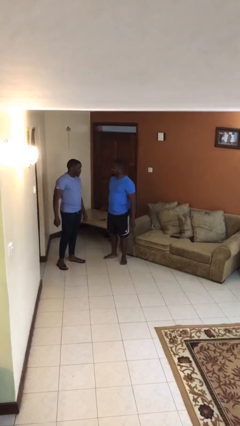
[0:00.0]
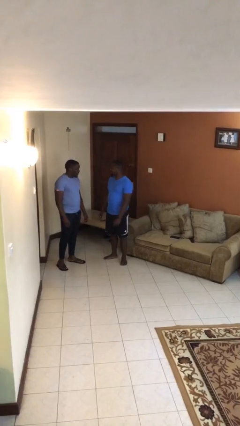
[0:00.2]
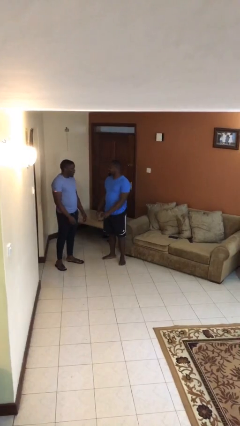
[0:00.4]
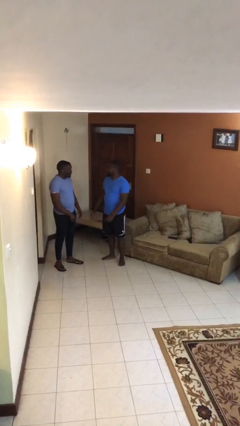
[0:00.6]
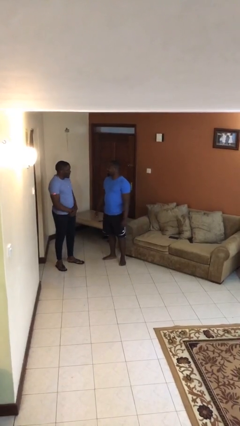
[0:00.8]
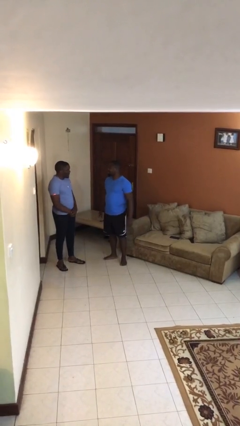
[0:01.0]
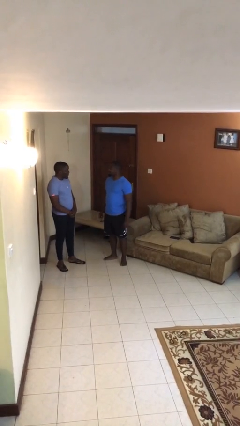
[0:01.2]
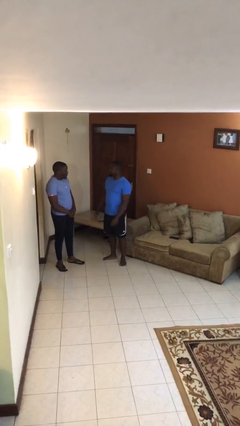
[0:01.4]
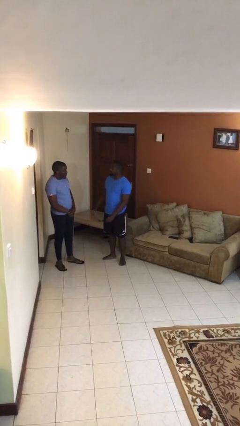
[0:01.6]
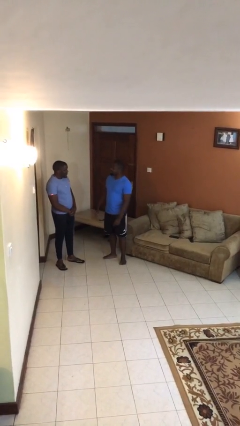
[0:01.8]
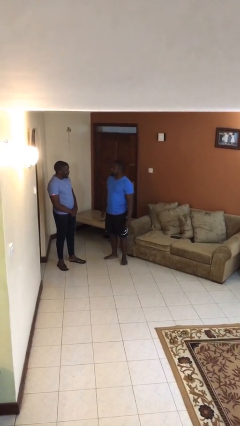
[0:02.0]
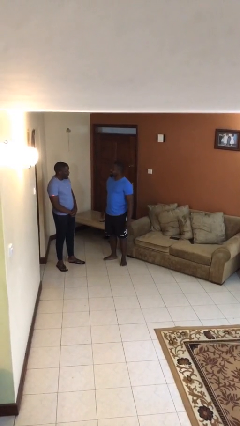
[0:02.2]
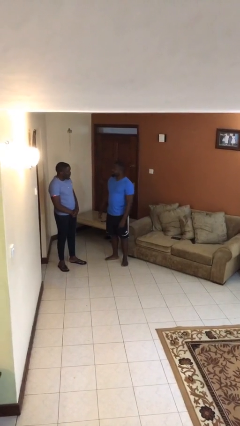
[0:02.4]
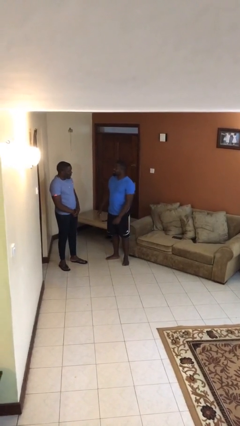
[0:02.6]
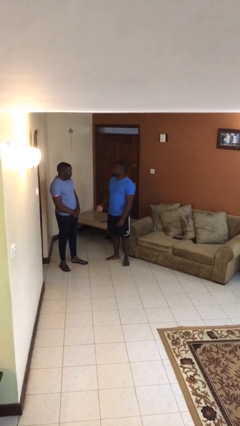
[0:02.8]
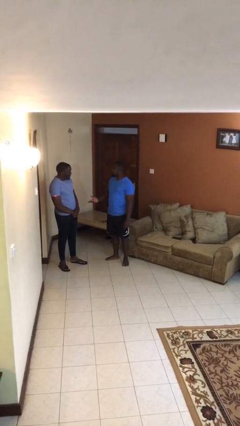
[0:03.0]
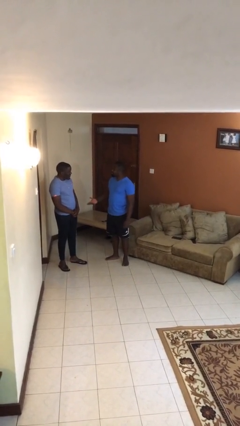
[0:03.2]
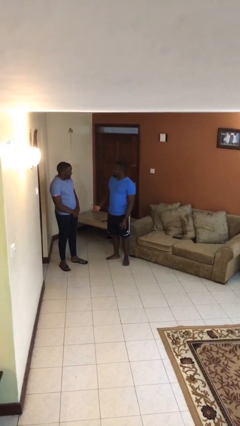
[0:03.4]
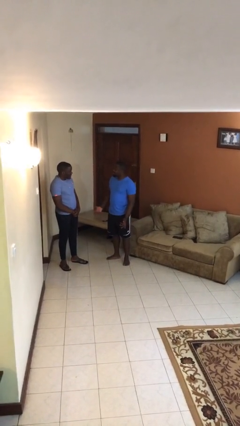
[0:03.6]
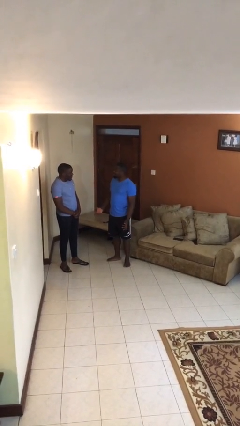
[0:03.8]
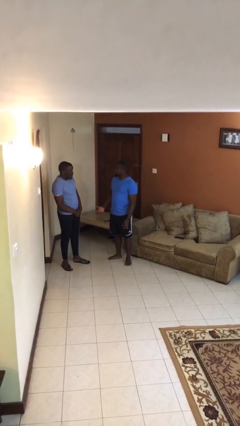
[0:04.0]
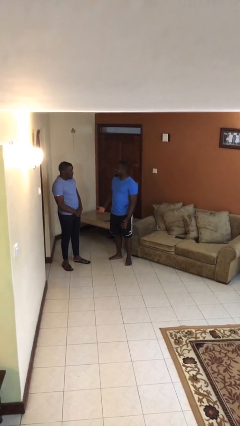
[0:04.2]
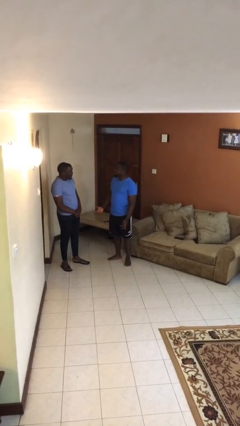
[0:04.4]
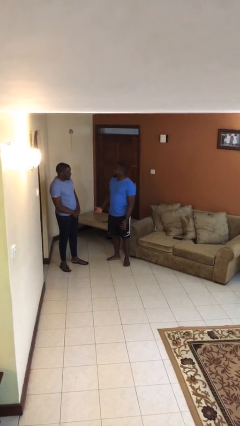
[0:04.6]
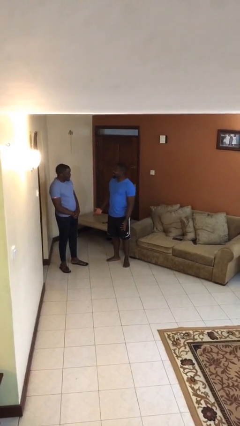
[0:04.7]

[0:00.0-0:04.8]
person talks to person

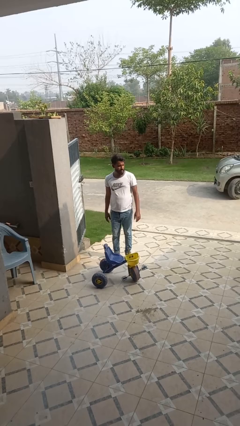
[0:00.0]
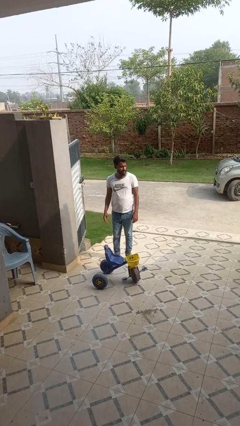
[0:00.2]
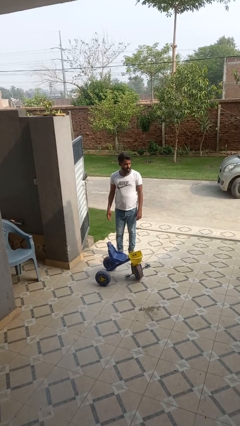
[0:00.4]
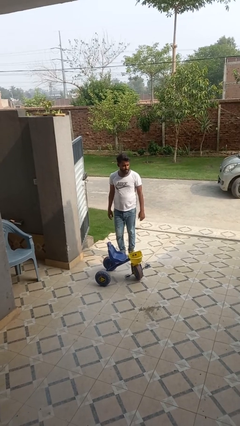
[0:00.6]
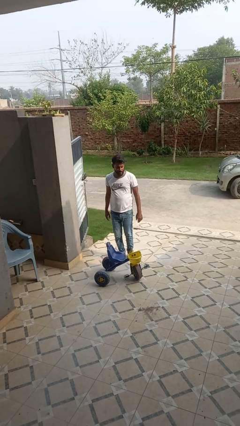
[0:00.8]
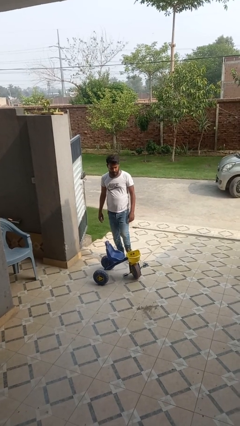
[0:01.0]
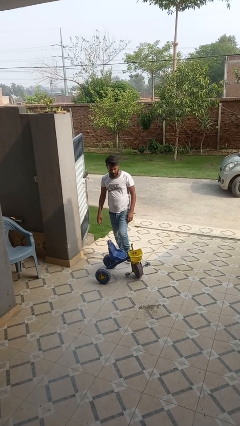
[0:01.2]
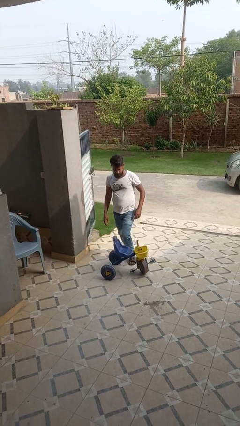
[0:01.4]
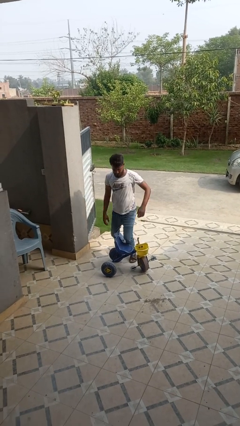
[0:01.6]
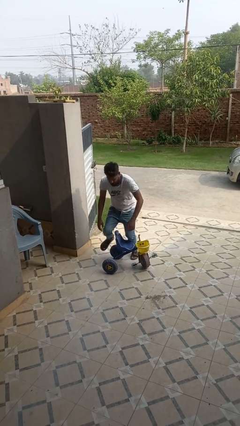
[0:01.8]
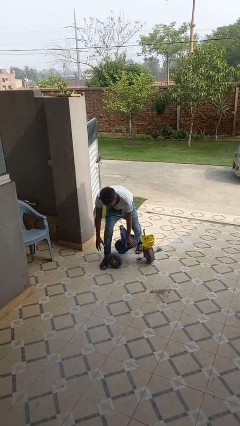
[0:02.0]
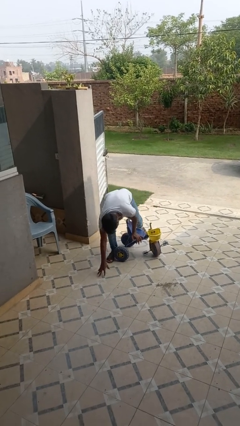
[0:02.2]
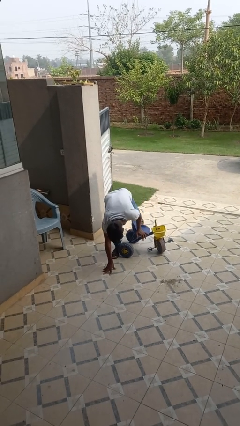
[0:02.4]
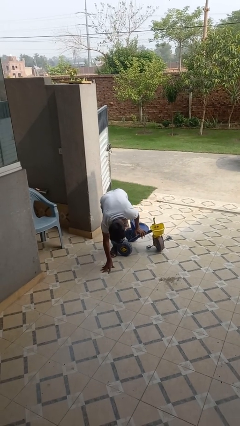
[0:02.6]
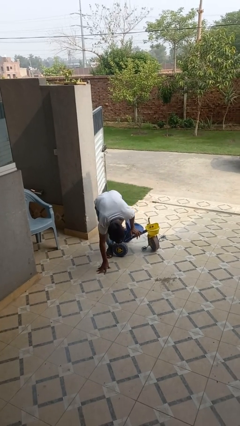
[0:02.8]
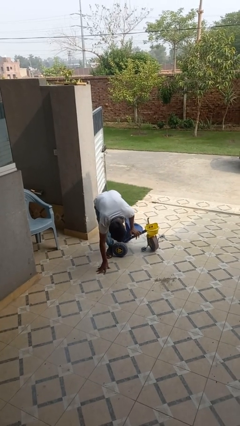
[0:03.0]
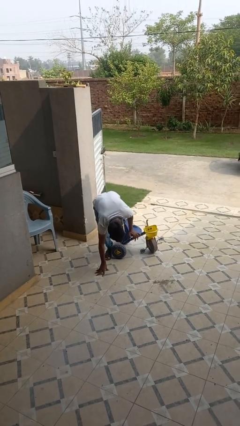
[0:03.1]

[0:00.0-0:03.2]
person trips on object on floor

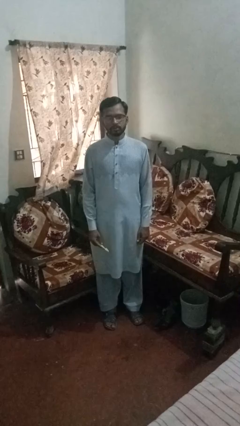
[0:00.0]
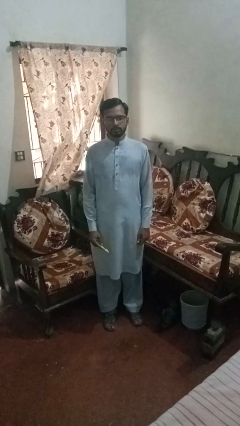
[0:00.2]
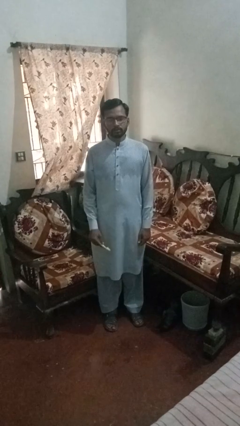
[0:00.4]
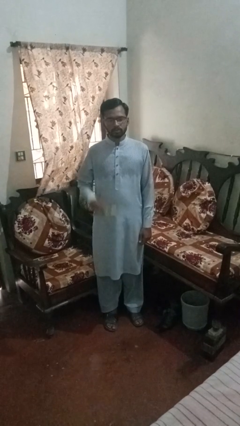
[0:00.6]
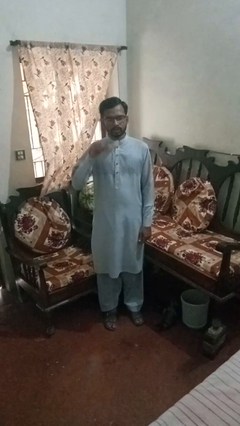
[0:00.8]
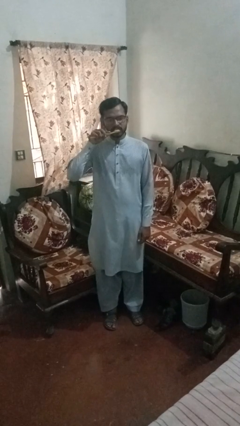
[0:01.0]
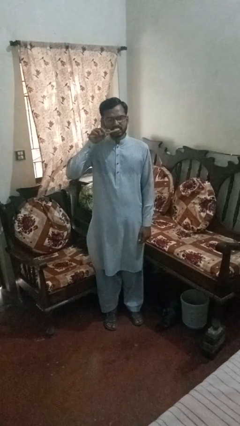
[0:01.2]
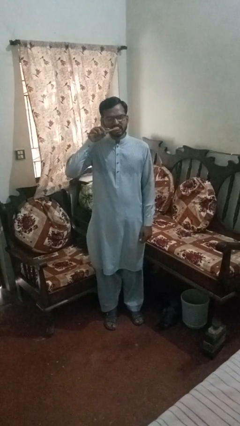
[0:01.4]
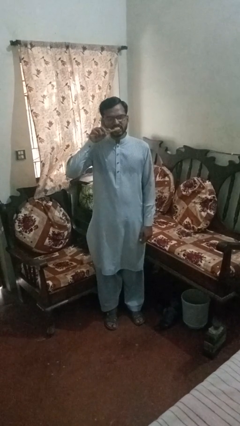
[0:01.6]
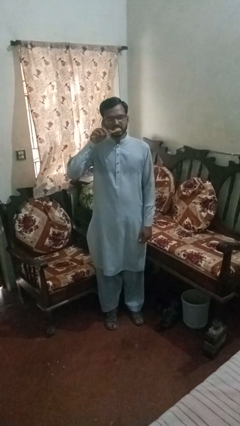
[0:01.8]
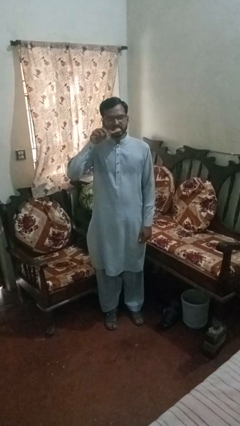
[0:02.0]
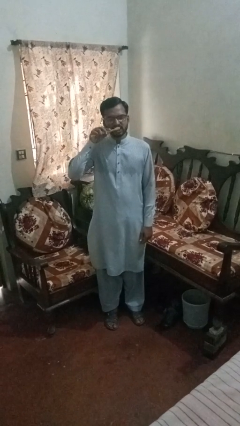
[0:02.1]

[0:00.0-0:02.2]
person brushes teeth

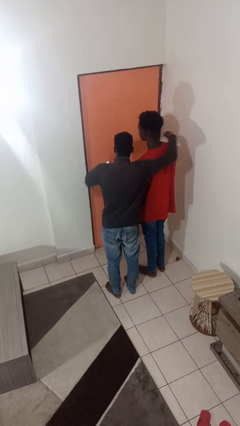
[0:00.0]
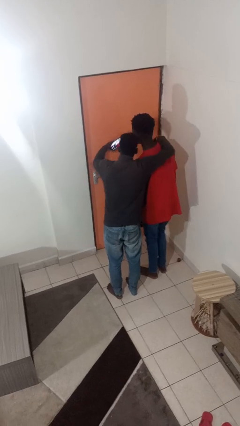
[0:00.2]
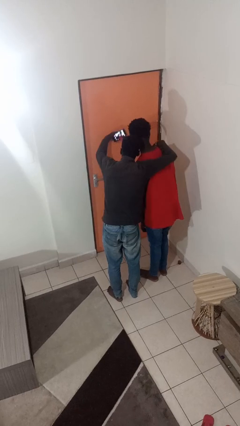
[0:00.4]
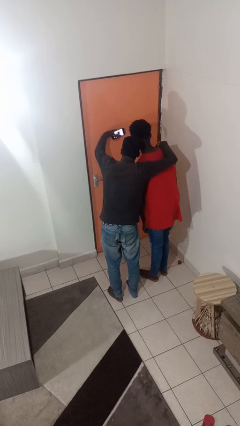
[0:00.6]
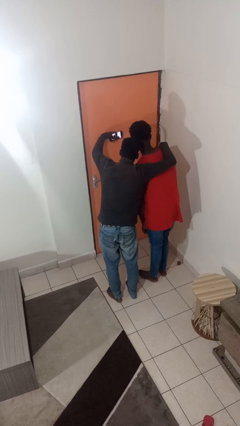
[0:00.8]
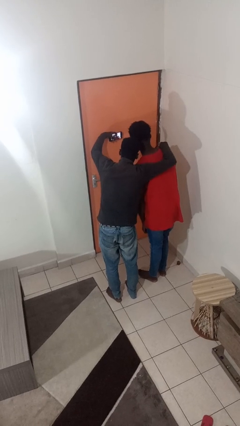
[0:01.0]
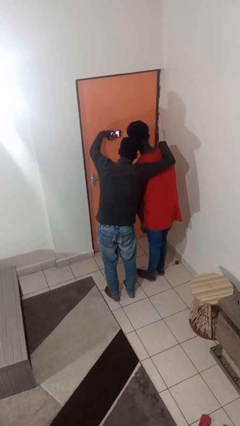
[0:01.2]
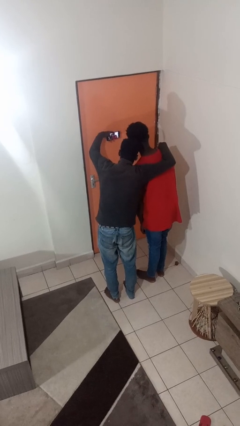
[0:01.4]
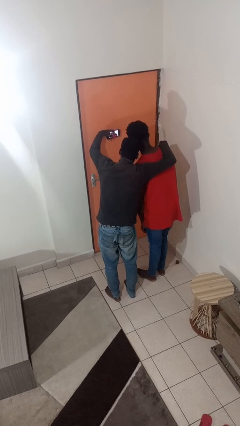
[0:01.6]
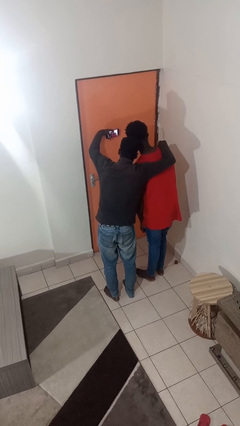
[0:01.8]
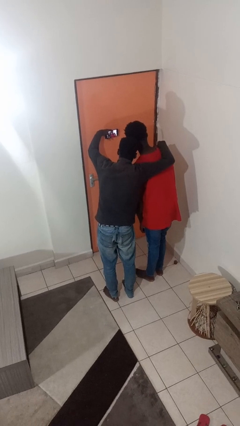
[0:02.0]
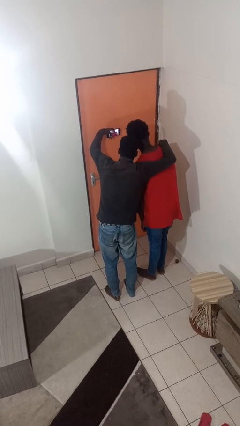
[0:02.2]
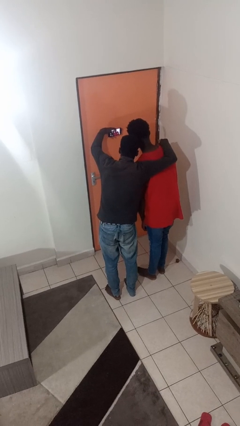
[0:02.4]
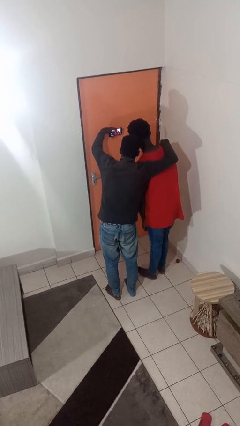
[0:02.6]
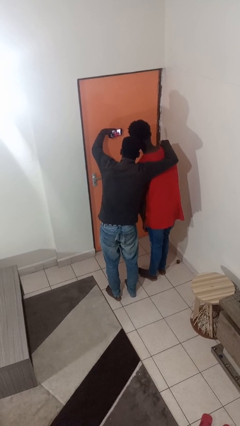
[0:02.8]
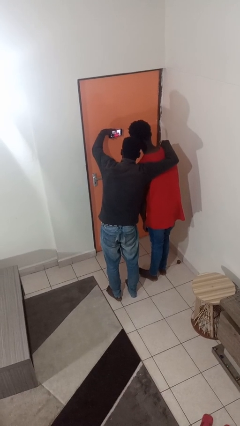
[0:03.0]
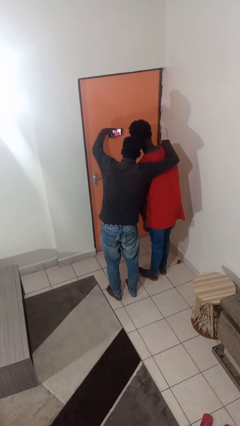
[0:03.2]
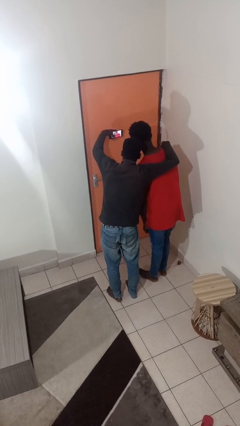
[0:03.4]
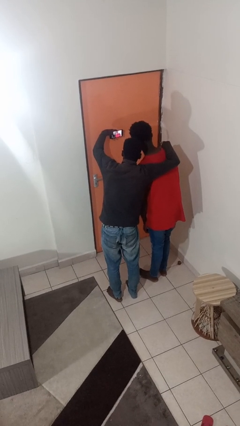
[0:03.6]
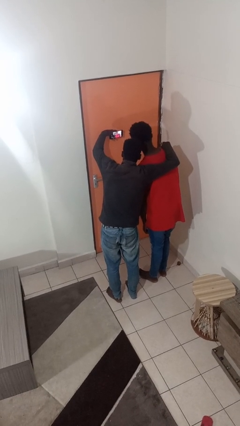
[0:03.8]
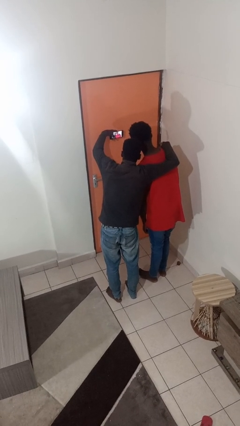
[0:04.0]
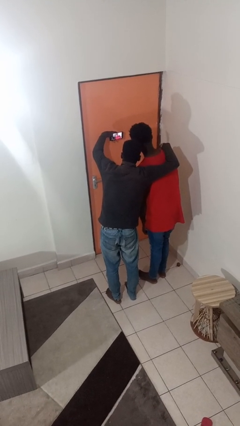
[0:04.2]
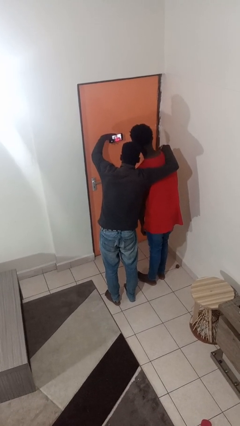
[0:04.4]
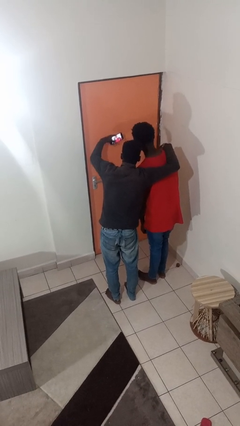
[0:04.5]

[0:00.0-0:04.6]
person takes selfie with person

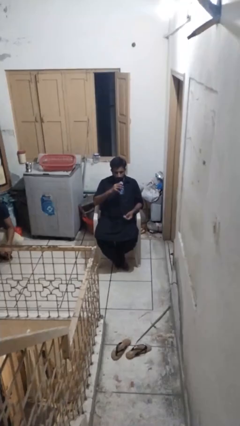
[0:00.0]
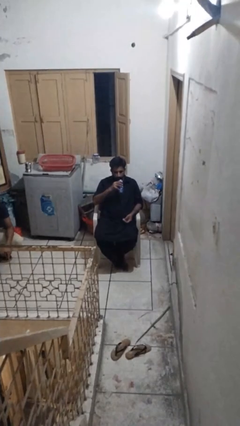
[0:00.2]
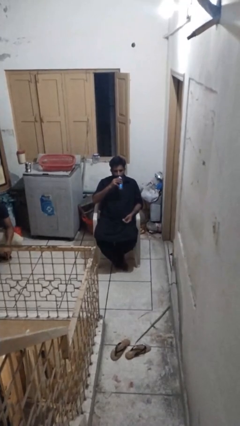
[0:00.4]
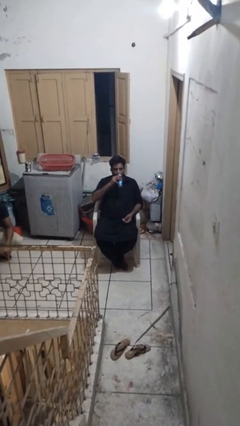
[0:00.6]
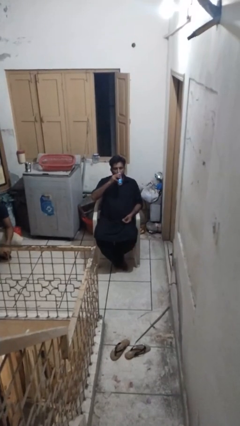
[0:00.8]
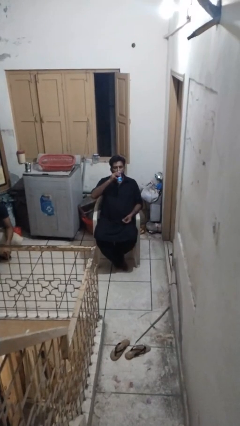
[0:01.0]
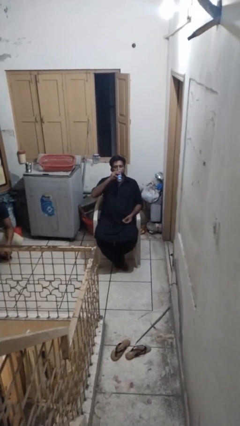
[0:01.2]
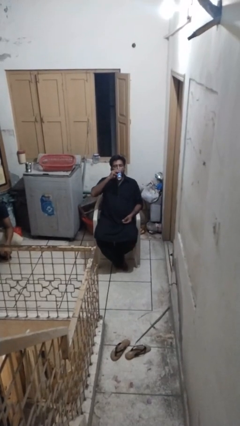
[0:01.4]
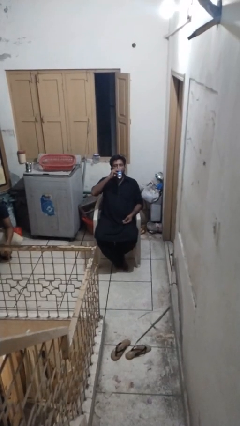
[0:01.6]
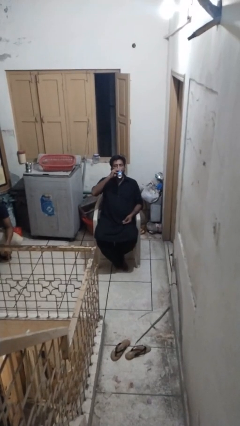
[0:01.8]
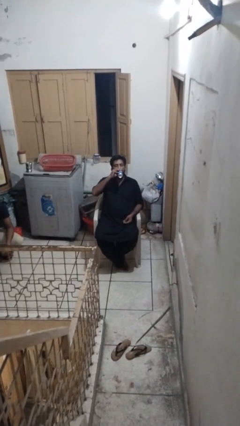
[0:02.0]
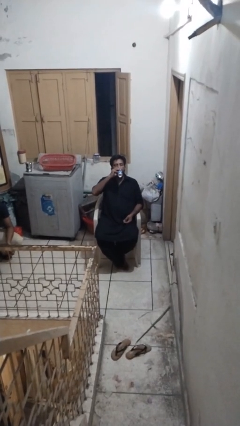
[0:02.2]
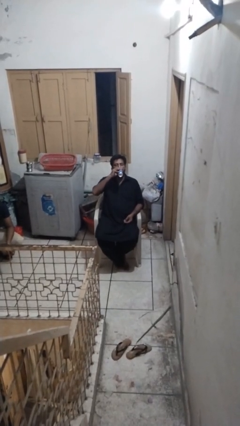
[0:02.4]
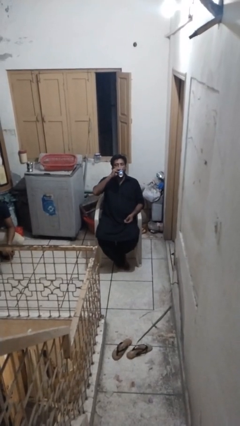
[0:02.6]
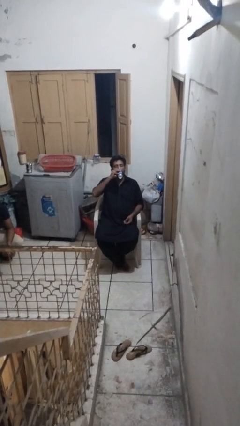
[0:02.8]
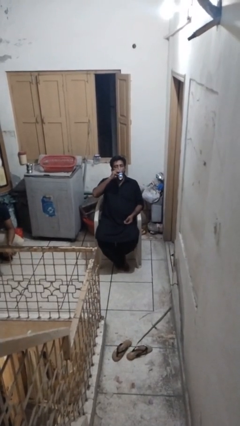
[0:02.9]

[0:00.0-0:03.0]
person drinks from beverage can
